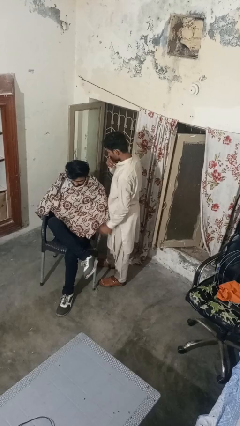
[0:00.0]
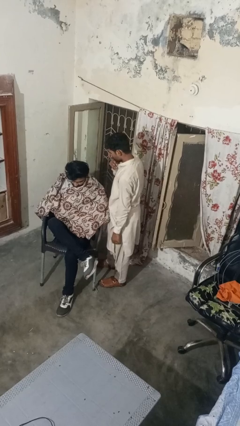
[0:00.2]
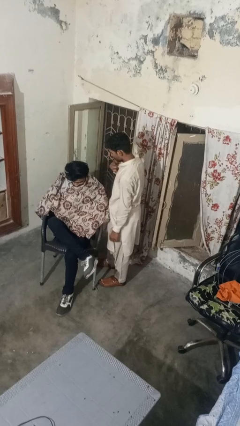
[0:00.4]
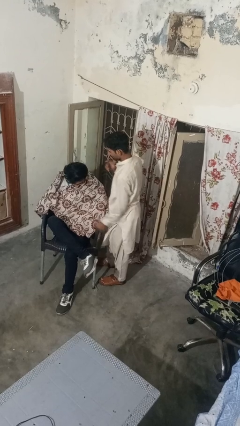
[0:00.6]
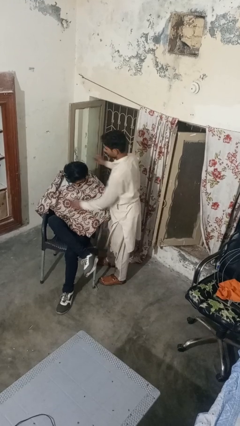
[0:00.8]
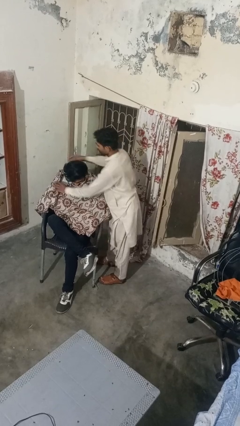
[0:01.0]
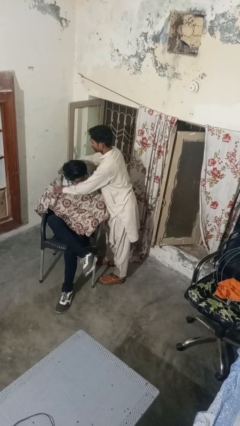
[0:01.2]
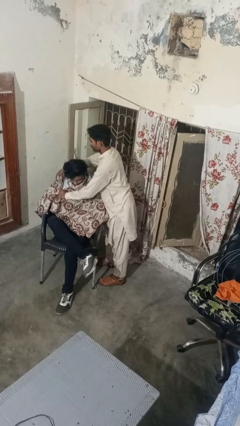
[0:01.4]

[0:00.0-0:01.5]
person uncovers friend with blanket

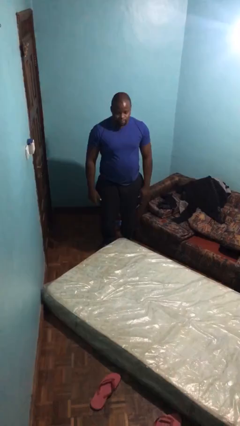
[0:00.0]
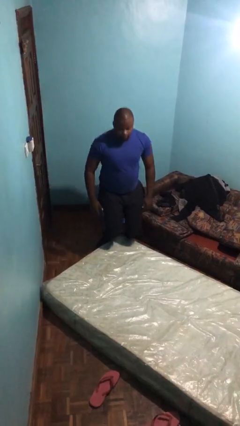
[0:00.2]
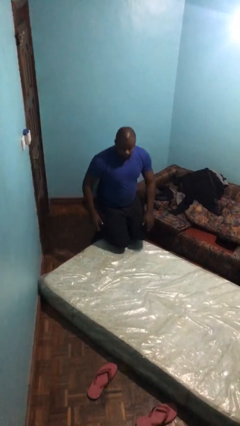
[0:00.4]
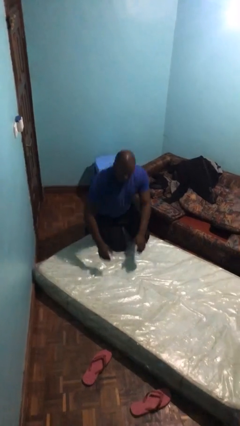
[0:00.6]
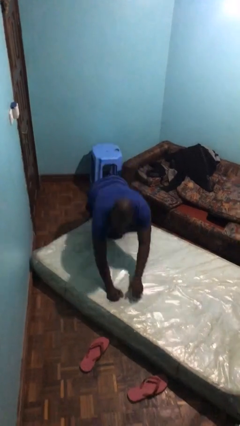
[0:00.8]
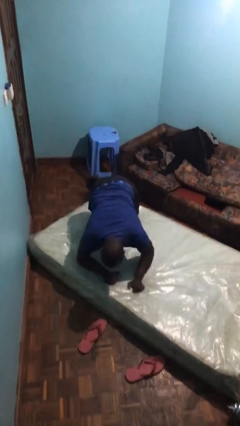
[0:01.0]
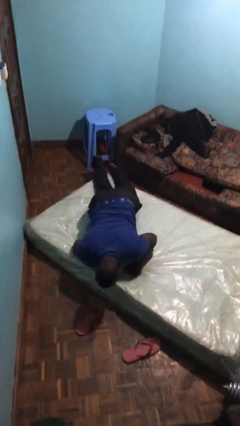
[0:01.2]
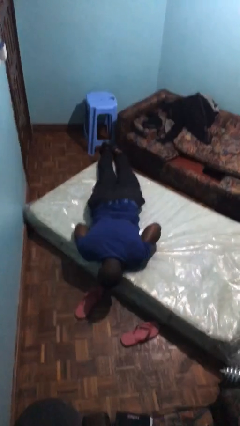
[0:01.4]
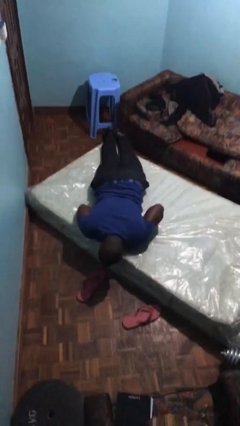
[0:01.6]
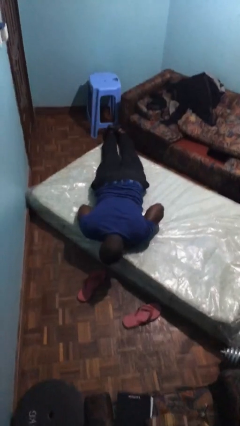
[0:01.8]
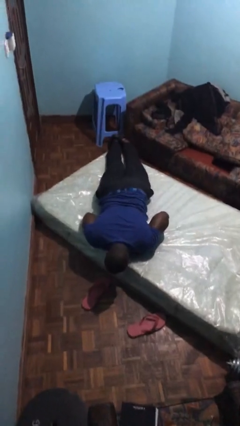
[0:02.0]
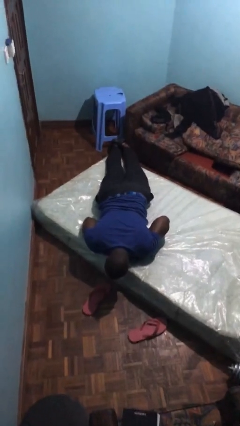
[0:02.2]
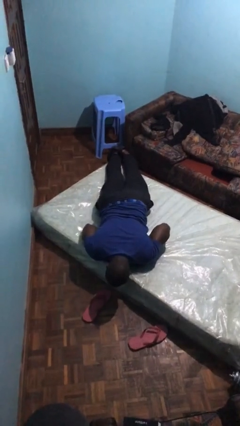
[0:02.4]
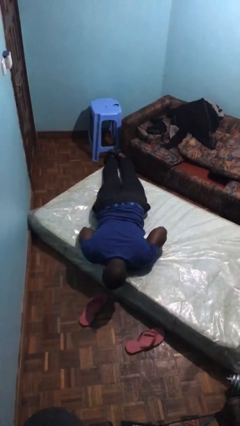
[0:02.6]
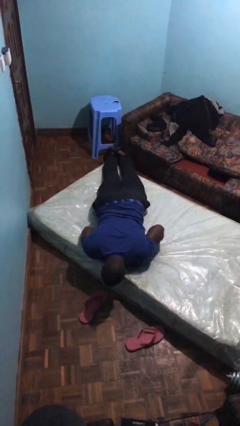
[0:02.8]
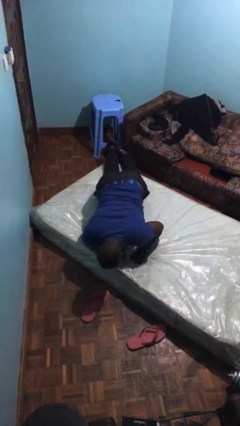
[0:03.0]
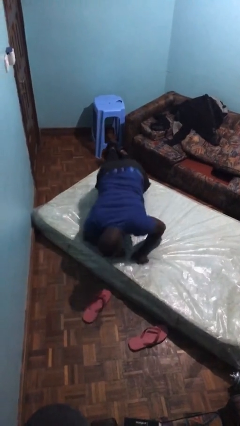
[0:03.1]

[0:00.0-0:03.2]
person lies down on bed

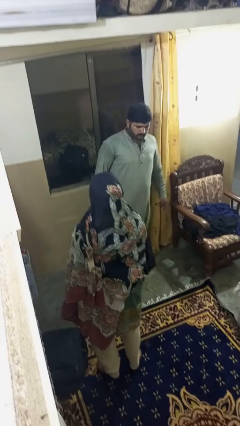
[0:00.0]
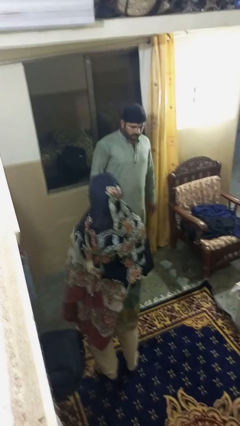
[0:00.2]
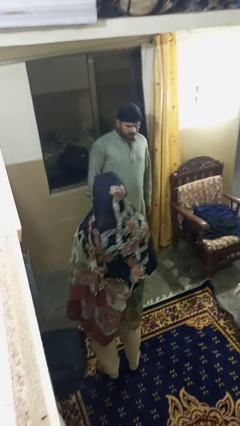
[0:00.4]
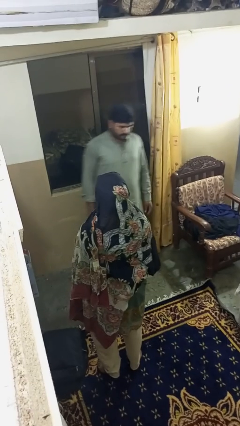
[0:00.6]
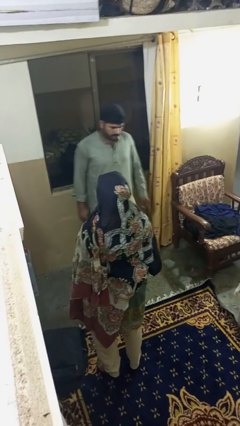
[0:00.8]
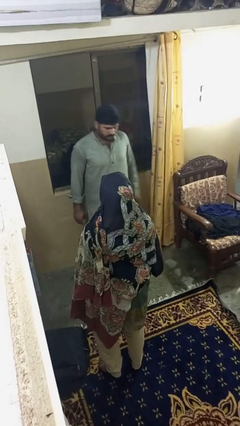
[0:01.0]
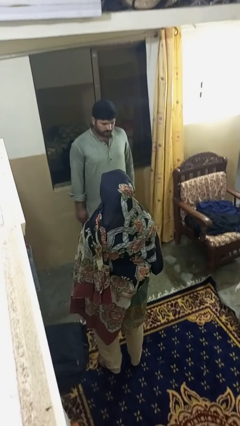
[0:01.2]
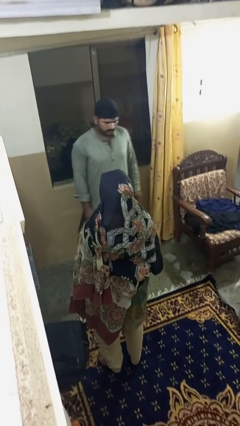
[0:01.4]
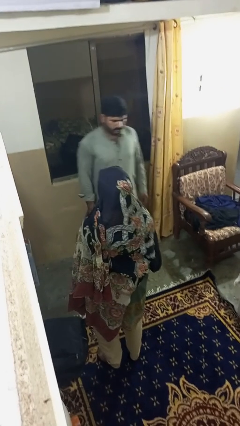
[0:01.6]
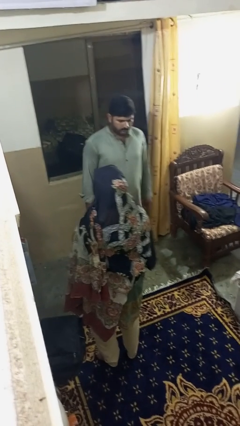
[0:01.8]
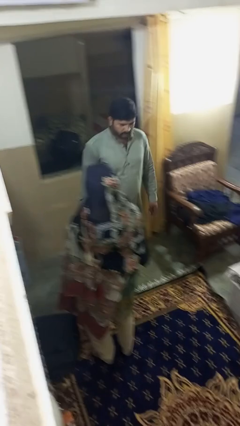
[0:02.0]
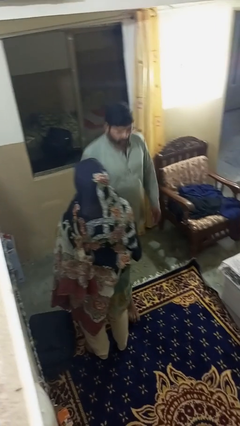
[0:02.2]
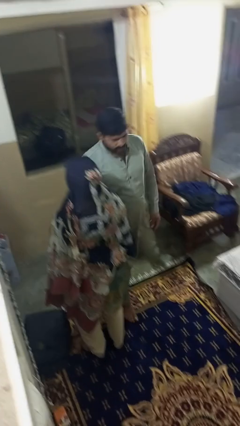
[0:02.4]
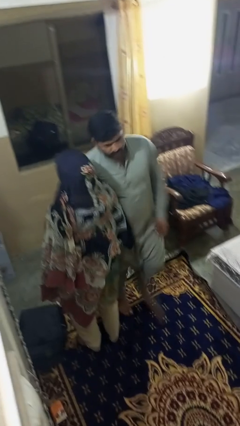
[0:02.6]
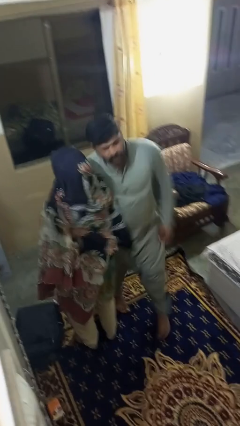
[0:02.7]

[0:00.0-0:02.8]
person bumps into person

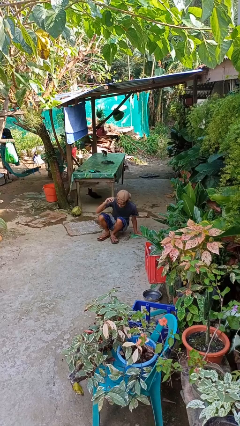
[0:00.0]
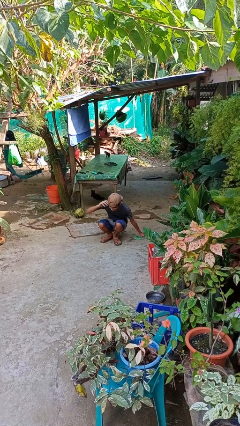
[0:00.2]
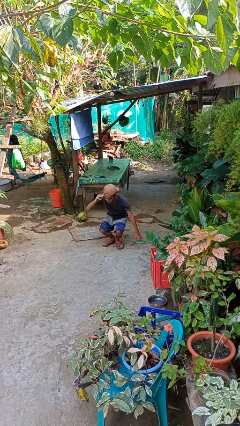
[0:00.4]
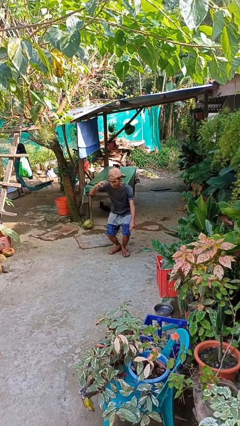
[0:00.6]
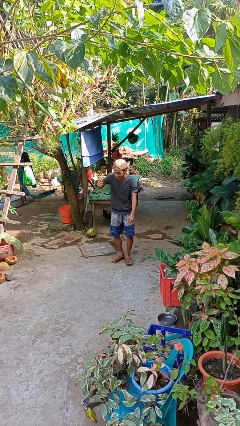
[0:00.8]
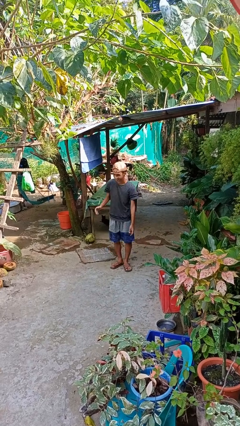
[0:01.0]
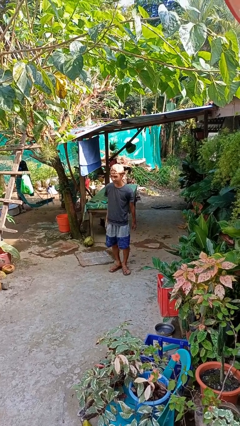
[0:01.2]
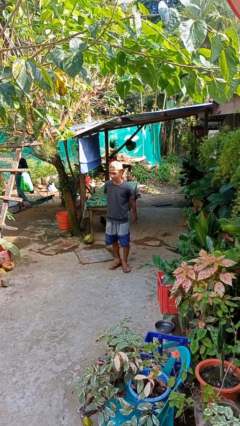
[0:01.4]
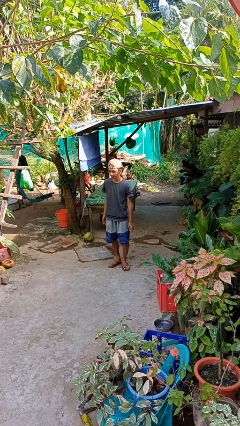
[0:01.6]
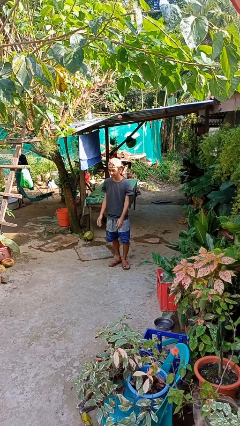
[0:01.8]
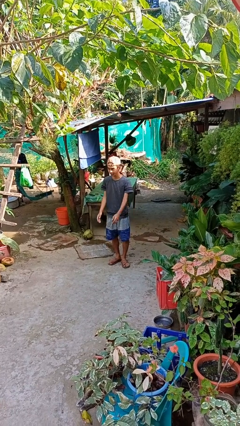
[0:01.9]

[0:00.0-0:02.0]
person stands up from floor

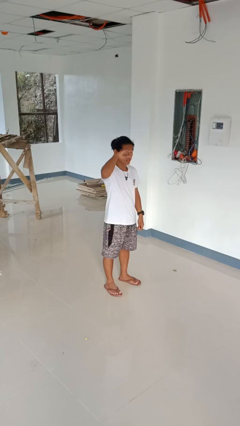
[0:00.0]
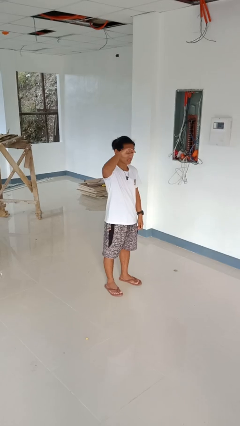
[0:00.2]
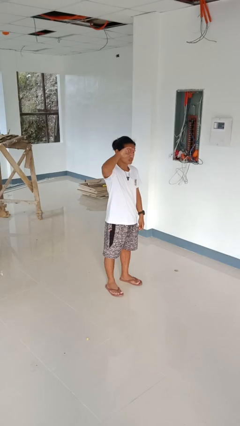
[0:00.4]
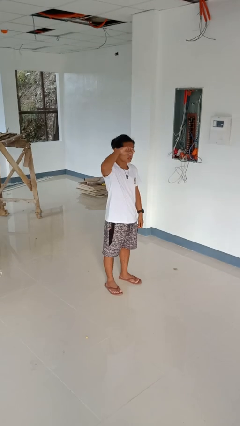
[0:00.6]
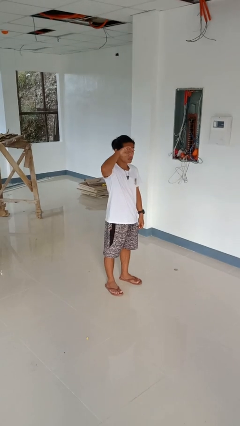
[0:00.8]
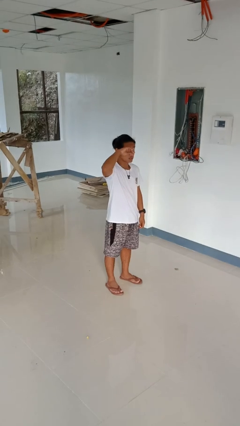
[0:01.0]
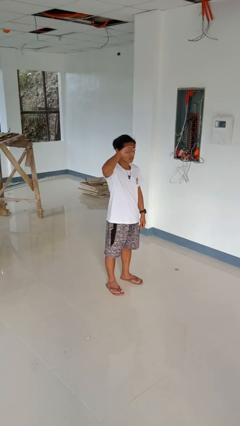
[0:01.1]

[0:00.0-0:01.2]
person rubs eyes

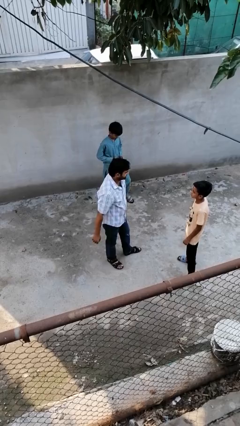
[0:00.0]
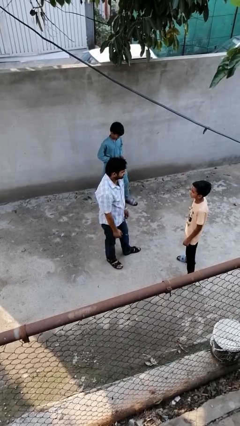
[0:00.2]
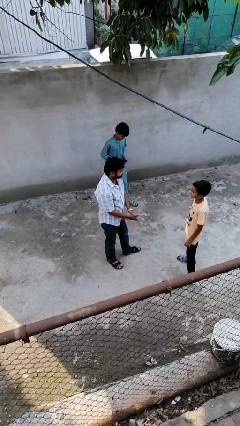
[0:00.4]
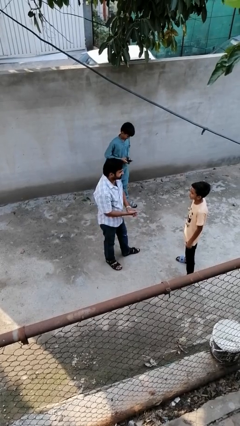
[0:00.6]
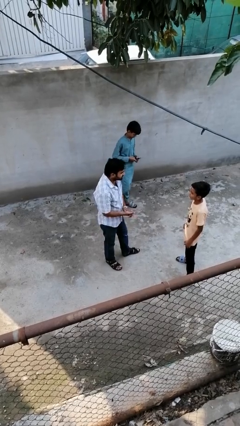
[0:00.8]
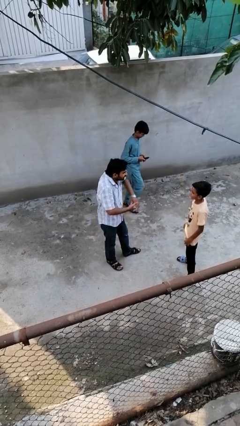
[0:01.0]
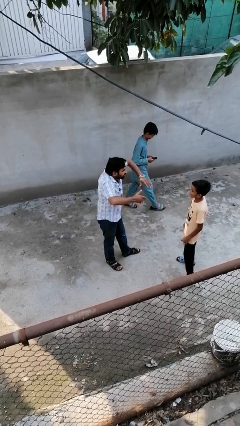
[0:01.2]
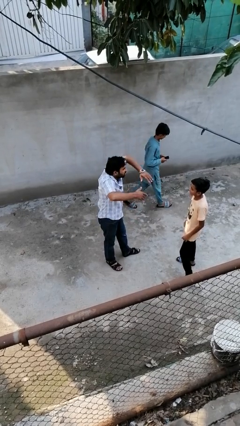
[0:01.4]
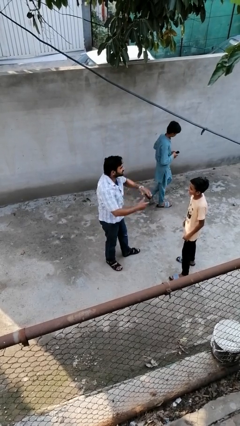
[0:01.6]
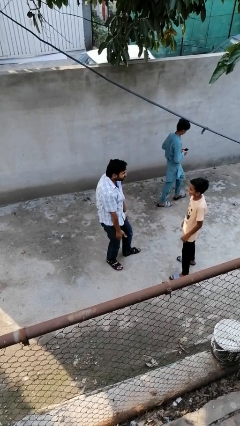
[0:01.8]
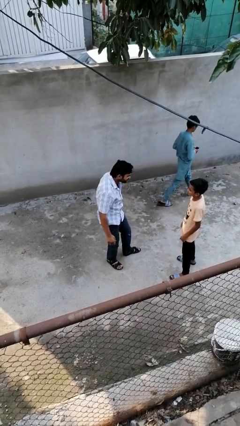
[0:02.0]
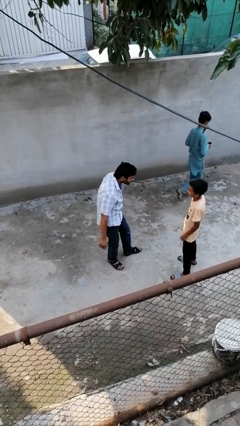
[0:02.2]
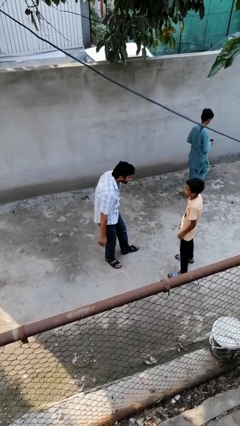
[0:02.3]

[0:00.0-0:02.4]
person laughs with person

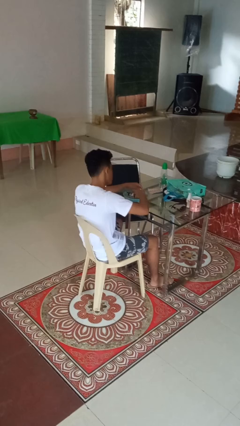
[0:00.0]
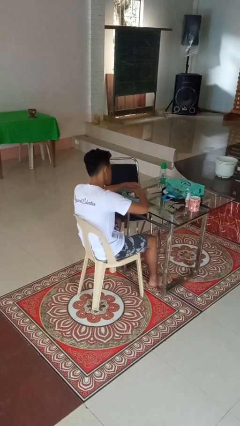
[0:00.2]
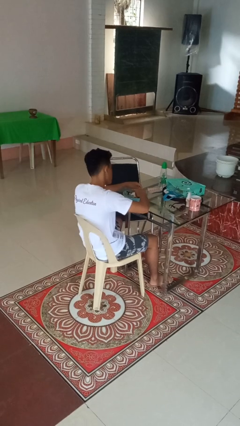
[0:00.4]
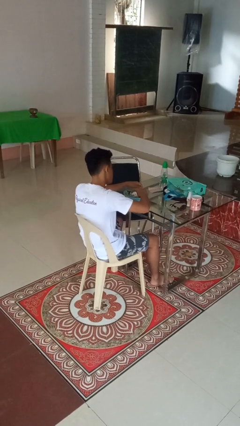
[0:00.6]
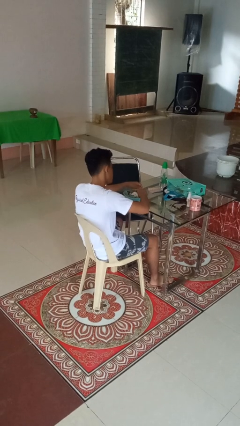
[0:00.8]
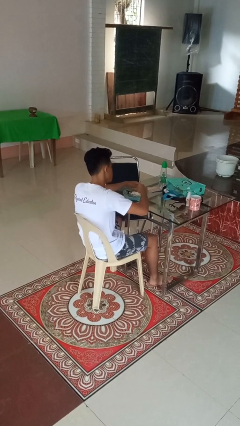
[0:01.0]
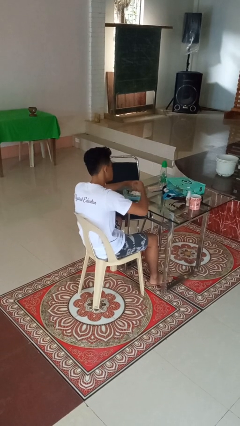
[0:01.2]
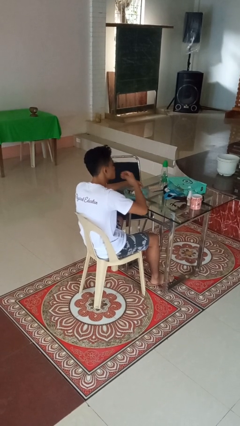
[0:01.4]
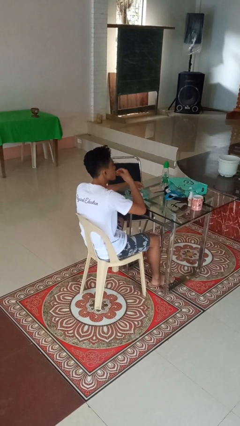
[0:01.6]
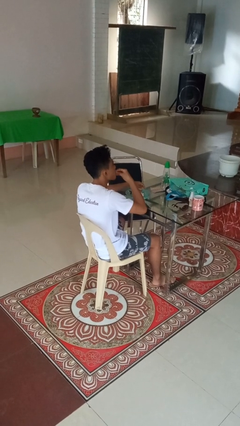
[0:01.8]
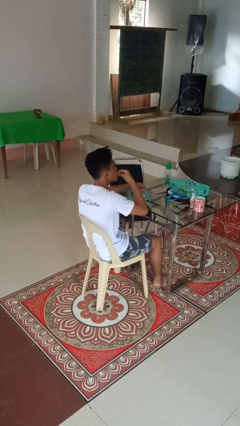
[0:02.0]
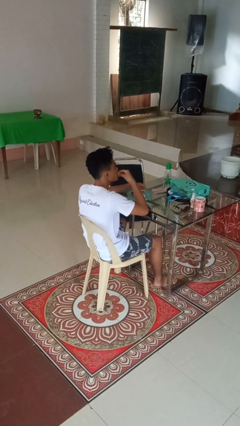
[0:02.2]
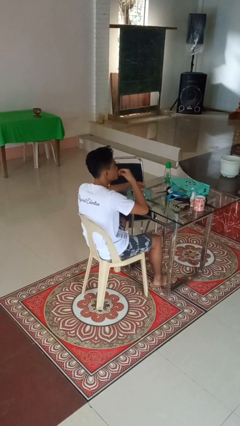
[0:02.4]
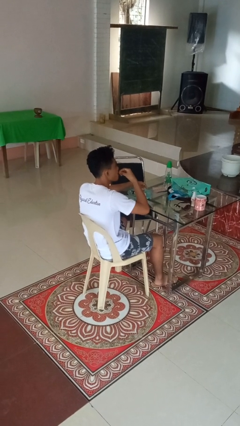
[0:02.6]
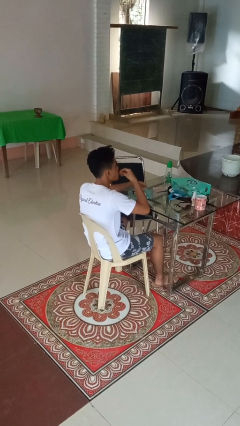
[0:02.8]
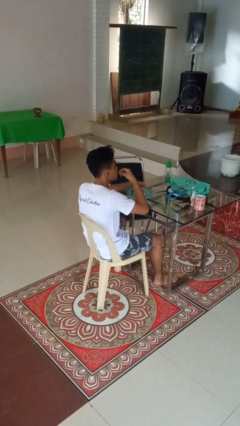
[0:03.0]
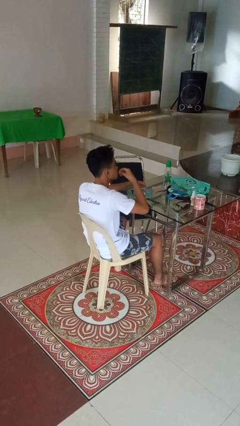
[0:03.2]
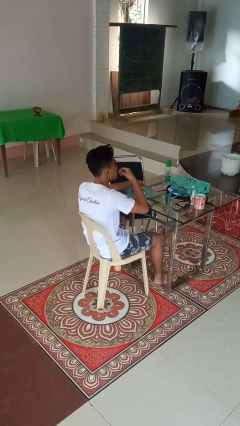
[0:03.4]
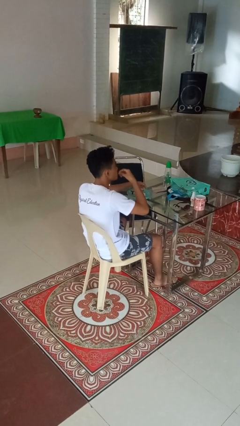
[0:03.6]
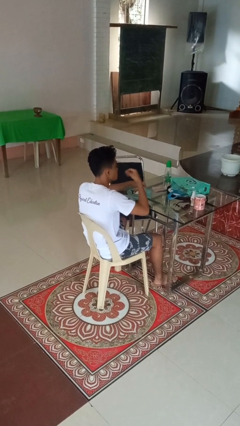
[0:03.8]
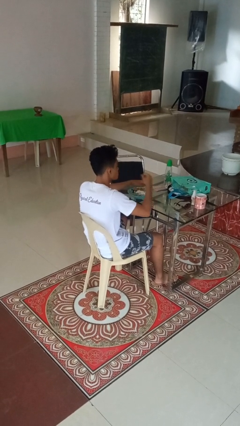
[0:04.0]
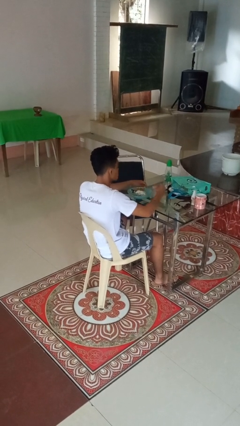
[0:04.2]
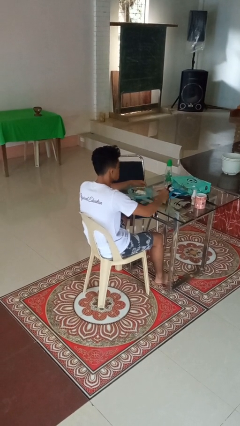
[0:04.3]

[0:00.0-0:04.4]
person eats with hands
